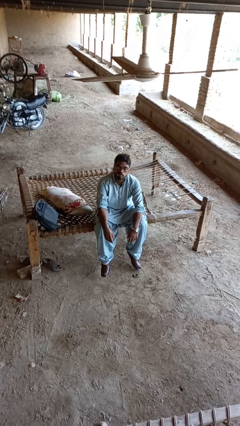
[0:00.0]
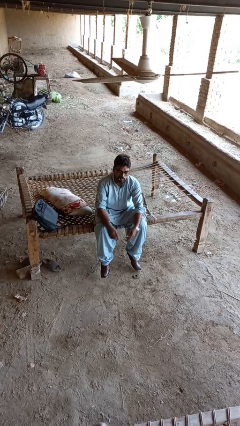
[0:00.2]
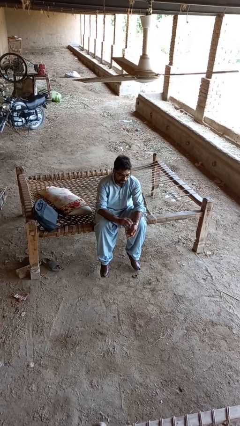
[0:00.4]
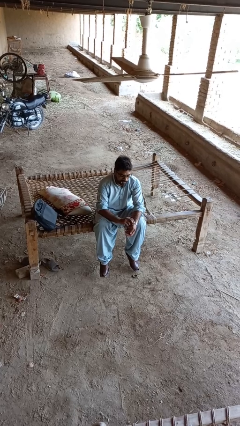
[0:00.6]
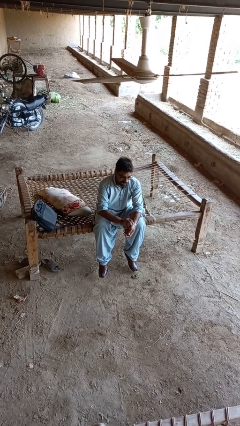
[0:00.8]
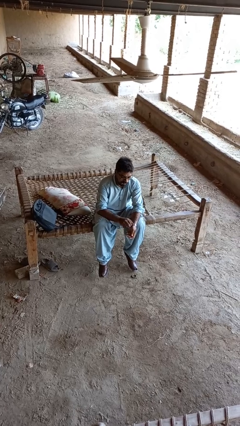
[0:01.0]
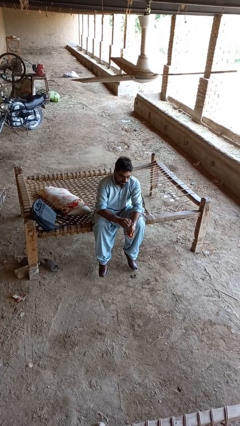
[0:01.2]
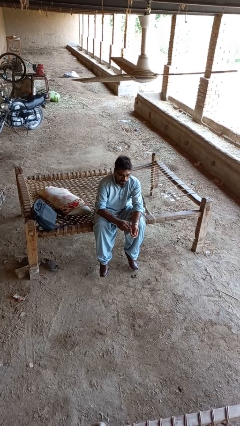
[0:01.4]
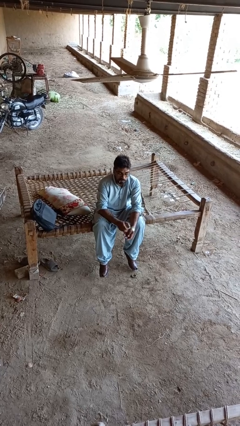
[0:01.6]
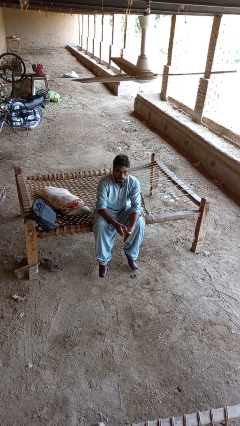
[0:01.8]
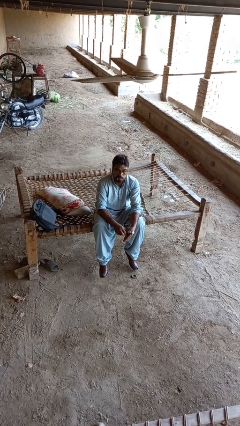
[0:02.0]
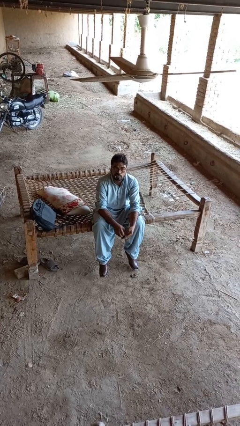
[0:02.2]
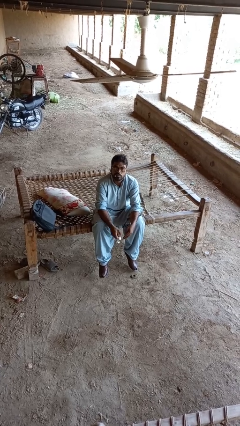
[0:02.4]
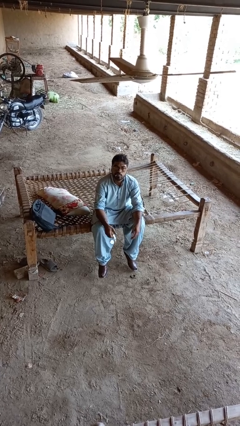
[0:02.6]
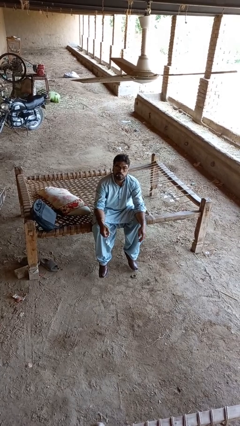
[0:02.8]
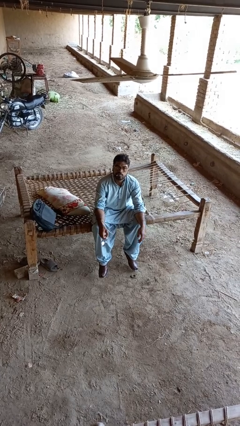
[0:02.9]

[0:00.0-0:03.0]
person takes off wristwatch

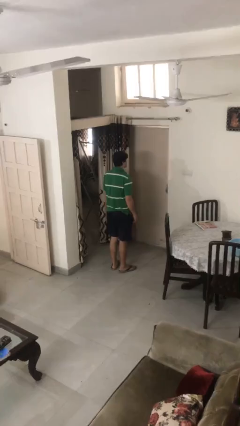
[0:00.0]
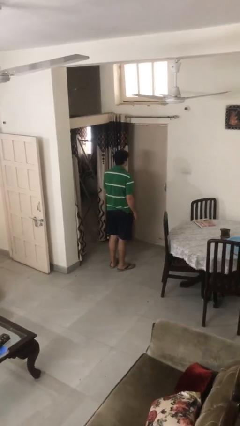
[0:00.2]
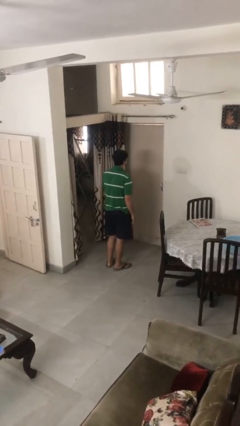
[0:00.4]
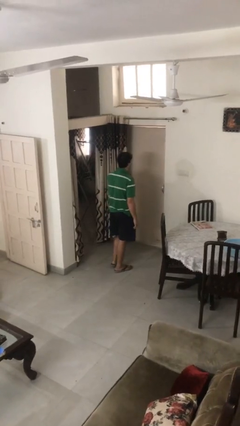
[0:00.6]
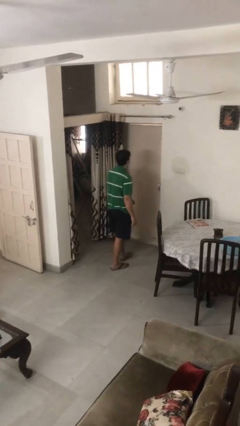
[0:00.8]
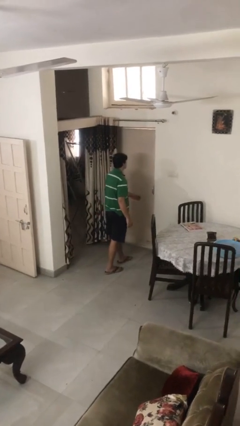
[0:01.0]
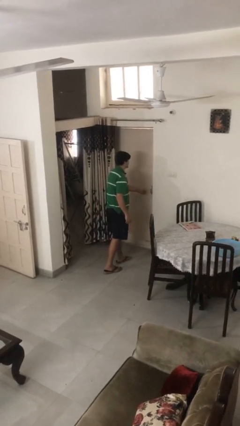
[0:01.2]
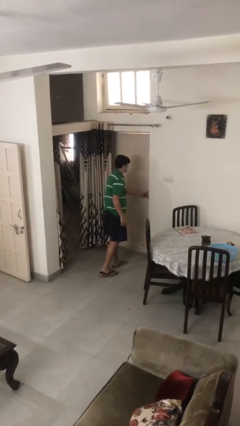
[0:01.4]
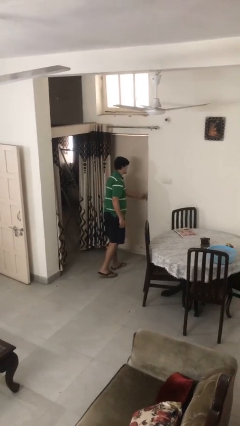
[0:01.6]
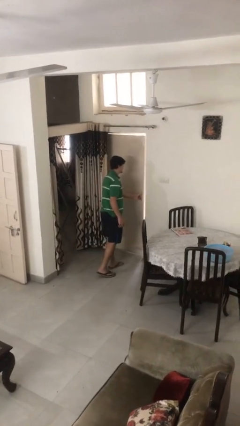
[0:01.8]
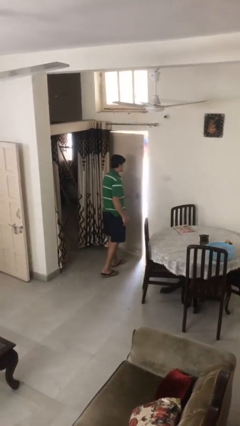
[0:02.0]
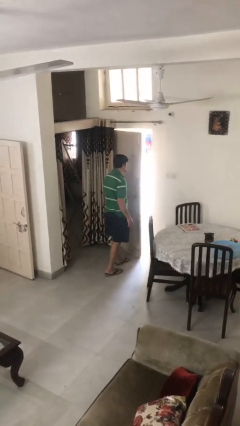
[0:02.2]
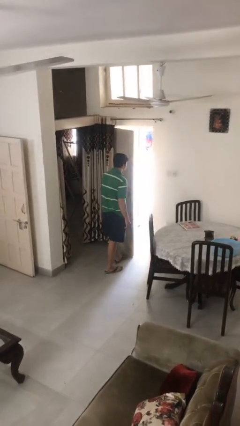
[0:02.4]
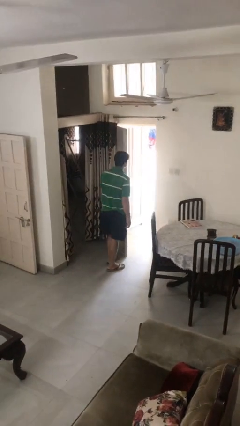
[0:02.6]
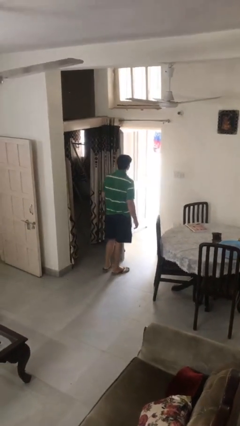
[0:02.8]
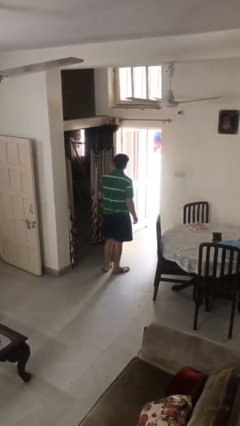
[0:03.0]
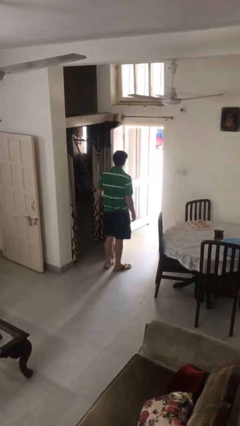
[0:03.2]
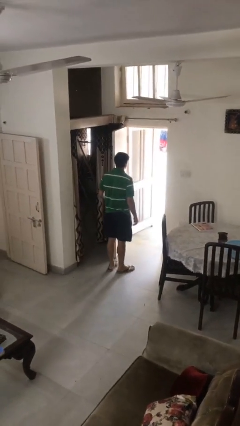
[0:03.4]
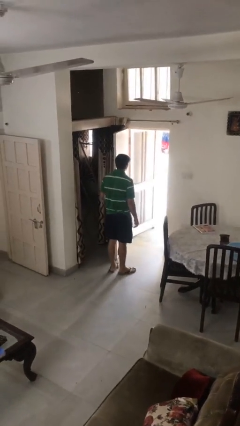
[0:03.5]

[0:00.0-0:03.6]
person opens facility door

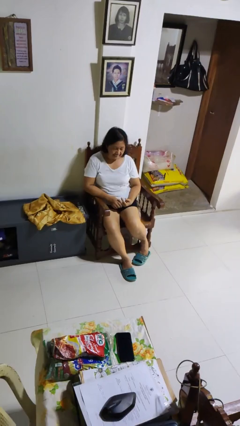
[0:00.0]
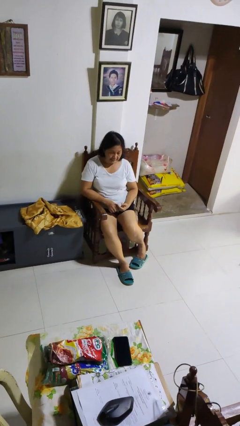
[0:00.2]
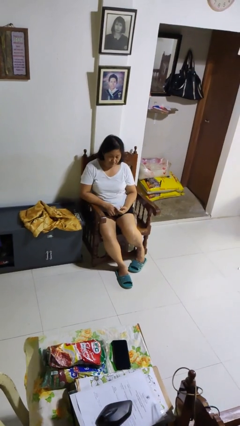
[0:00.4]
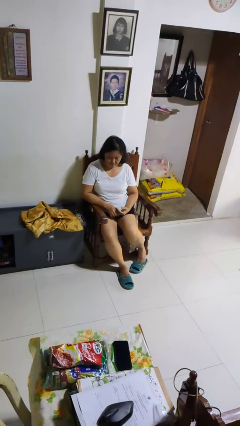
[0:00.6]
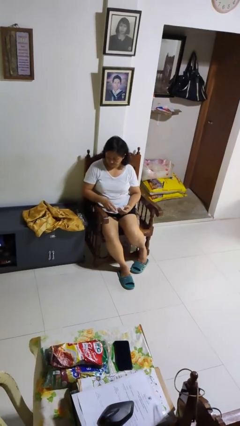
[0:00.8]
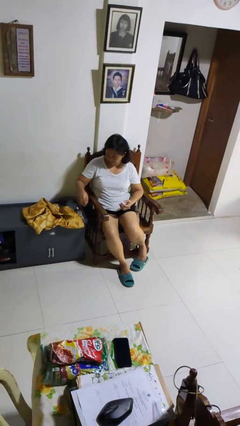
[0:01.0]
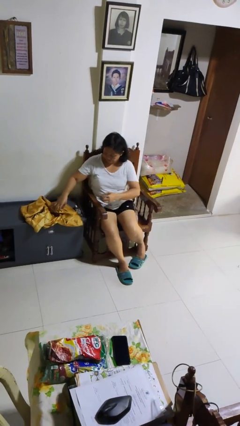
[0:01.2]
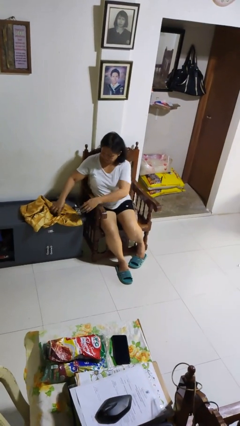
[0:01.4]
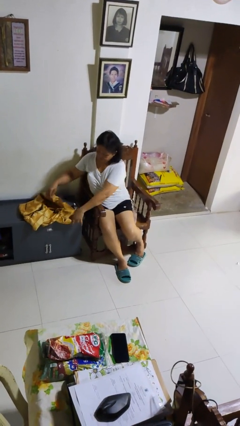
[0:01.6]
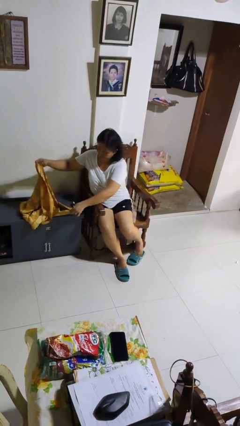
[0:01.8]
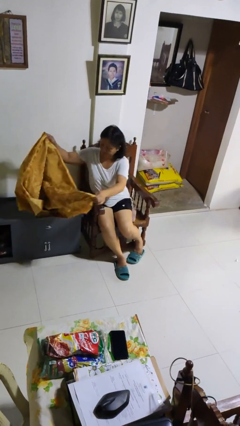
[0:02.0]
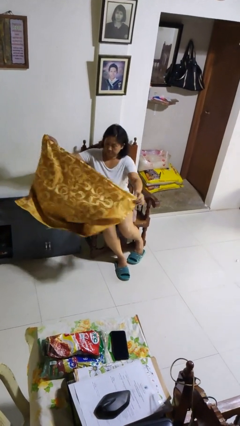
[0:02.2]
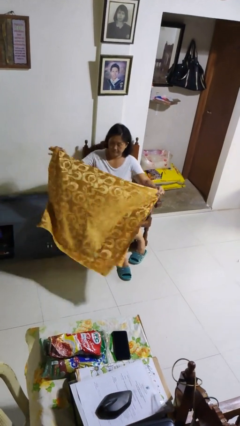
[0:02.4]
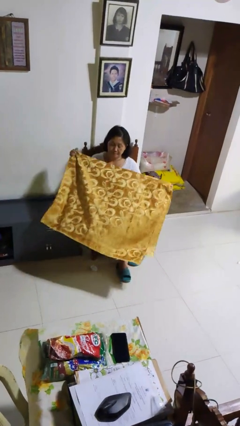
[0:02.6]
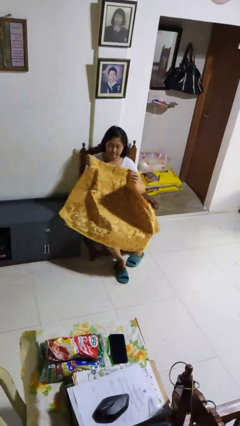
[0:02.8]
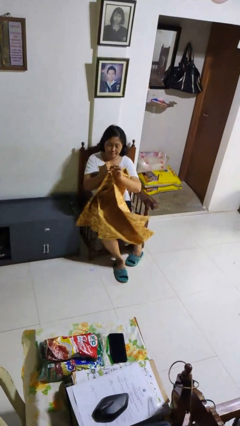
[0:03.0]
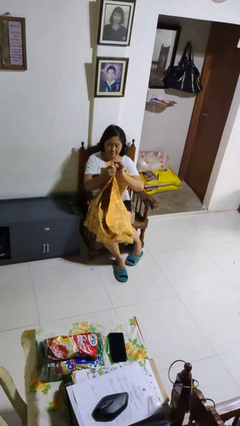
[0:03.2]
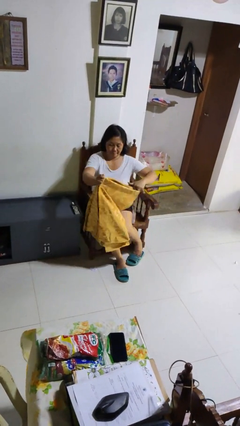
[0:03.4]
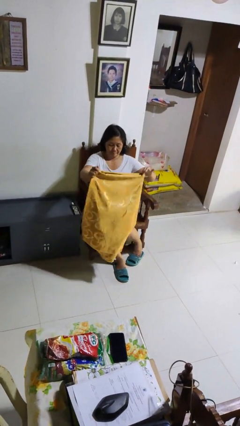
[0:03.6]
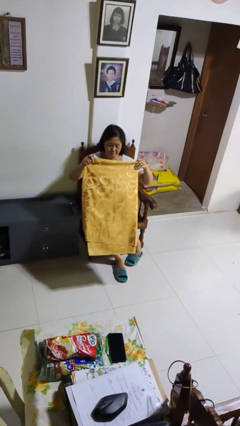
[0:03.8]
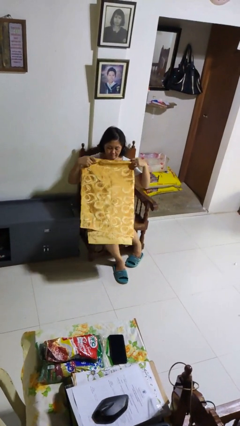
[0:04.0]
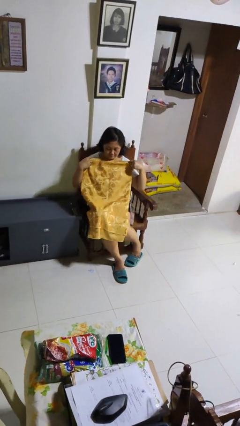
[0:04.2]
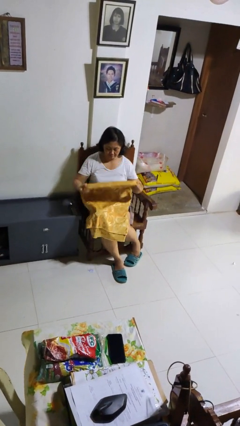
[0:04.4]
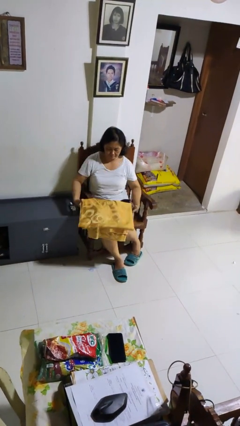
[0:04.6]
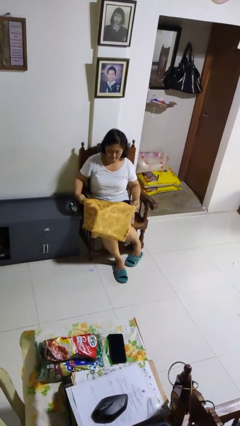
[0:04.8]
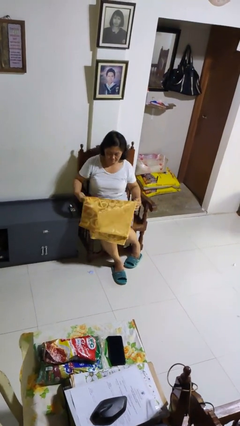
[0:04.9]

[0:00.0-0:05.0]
person folds blanket

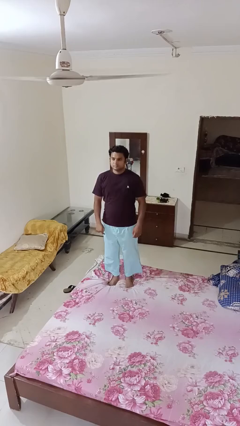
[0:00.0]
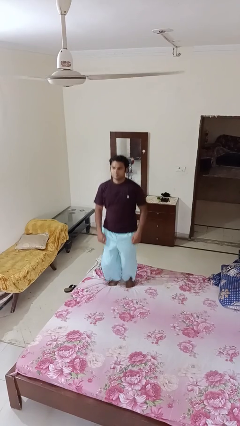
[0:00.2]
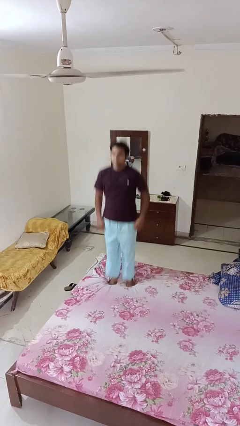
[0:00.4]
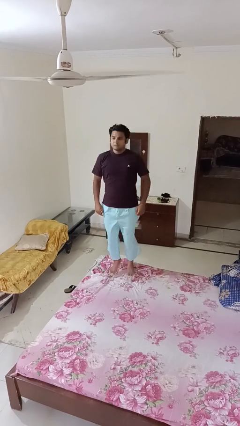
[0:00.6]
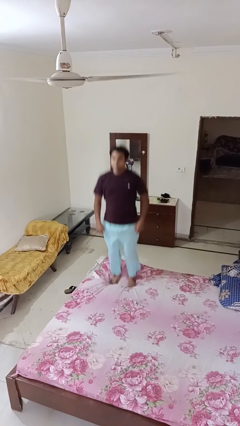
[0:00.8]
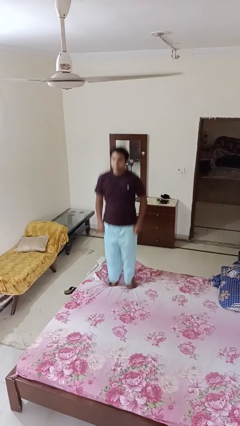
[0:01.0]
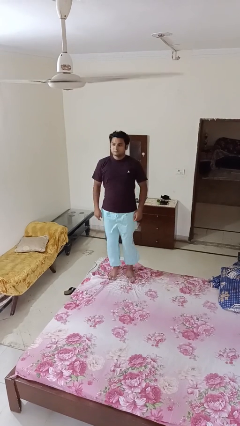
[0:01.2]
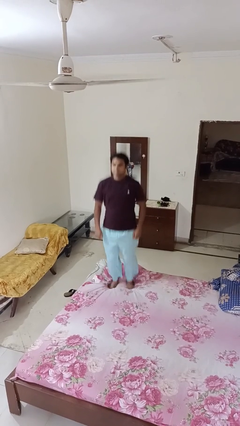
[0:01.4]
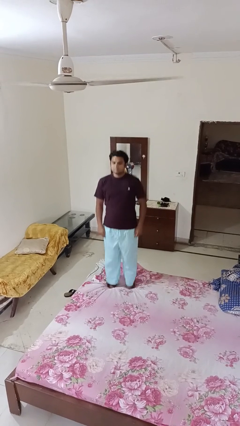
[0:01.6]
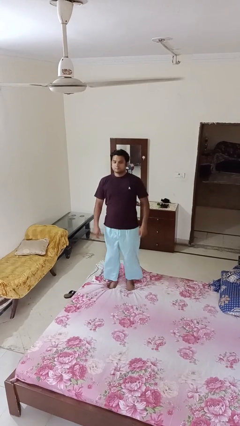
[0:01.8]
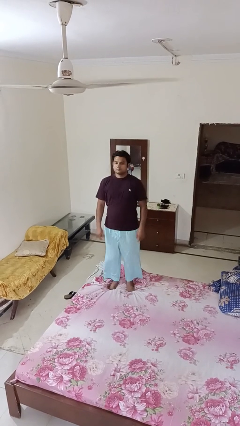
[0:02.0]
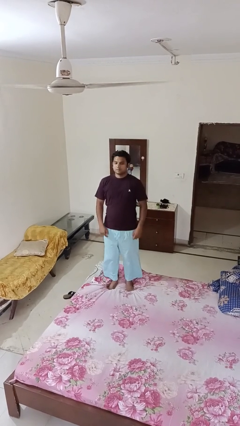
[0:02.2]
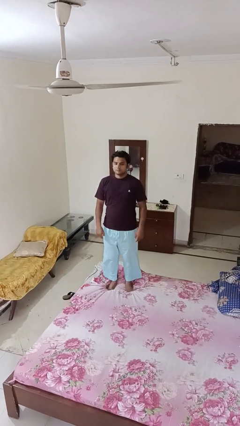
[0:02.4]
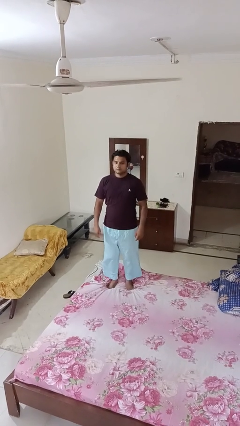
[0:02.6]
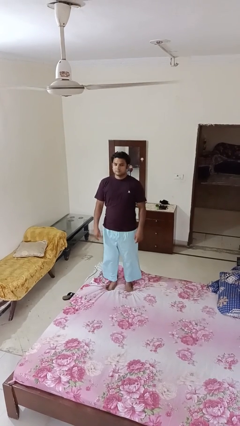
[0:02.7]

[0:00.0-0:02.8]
person jumps on bed

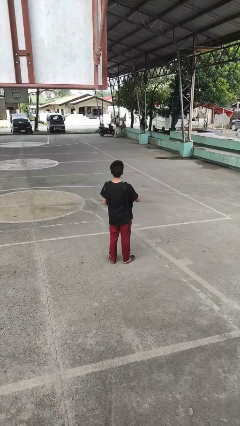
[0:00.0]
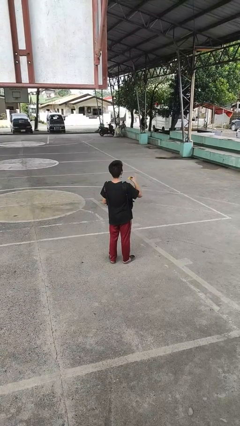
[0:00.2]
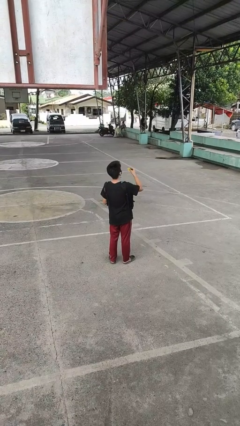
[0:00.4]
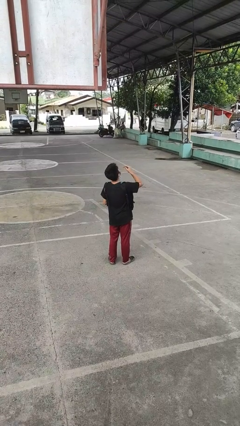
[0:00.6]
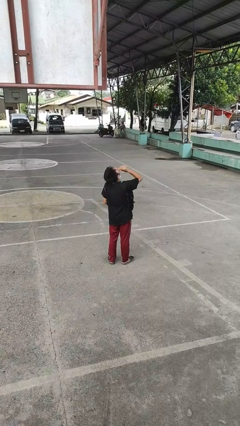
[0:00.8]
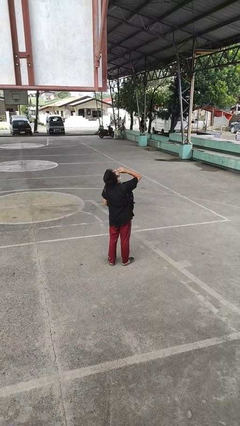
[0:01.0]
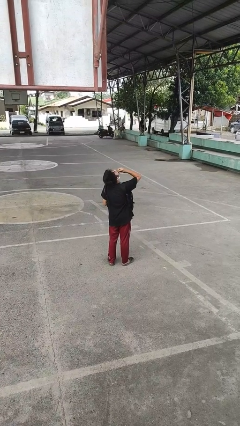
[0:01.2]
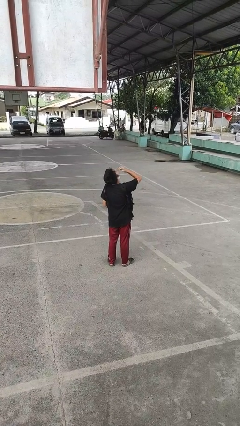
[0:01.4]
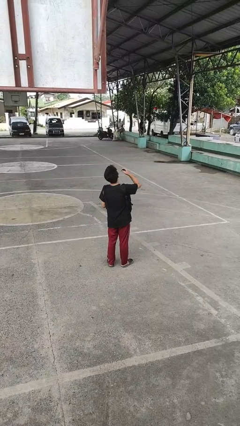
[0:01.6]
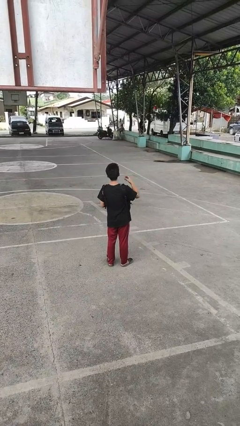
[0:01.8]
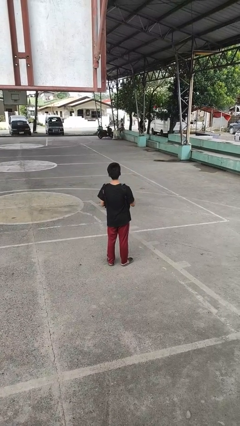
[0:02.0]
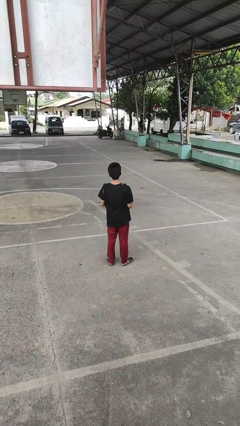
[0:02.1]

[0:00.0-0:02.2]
person eats snack from bag

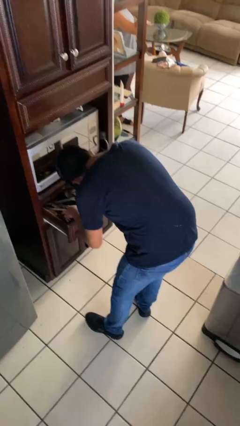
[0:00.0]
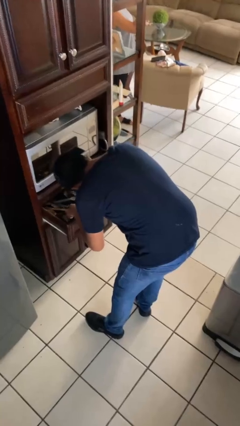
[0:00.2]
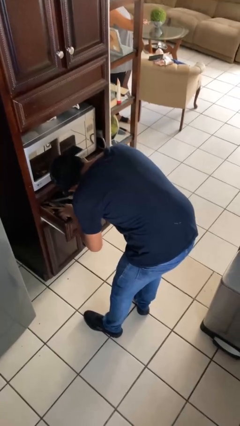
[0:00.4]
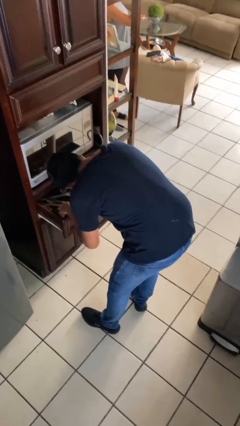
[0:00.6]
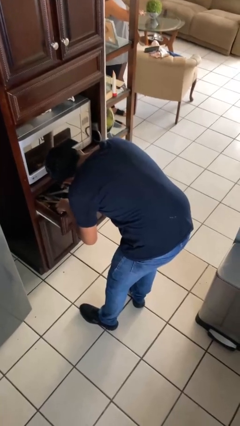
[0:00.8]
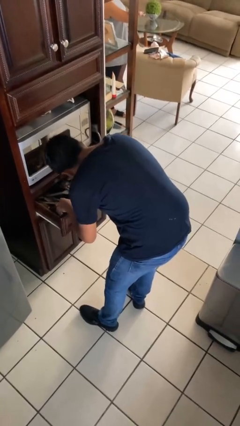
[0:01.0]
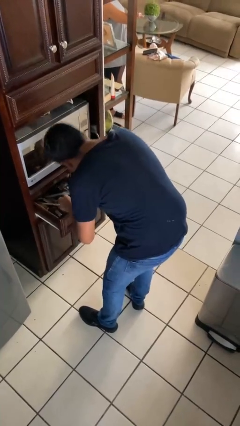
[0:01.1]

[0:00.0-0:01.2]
person searches in kitchen drawer
